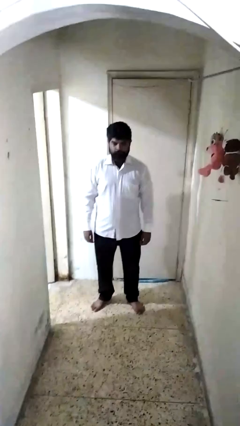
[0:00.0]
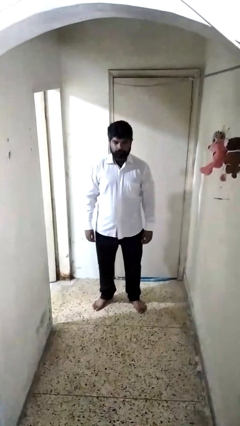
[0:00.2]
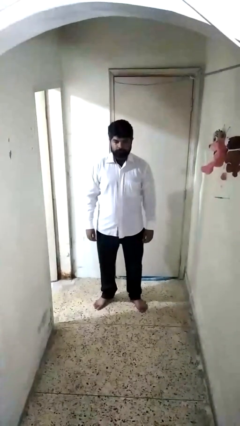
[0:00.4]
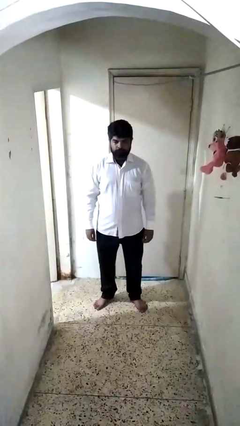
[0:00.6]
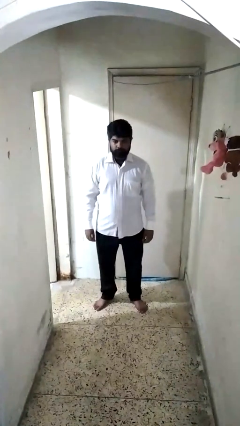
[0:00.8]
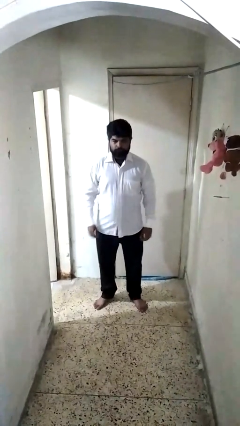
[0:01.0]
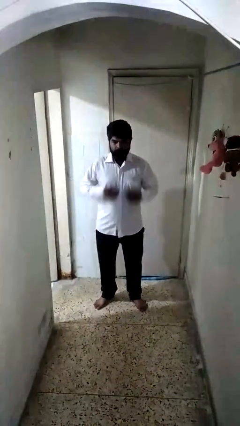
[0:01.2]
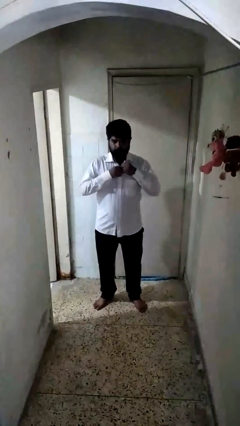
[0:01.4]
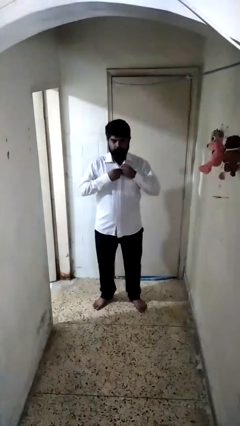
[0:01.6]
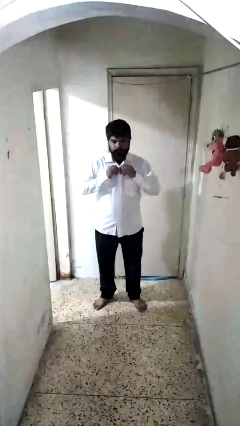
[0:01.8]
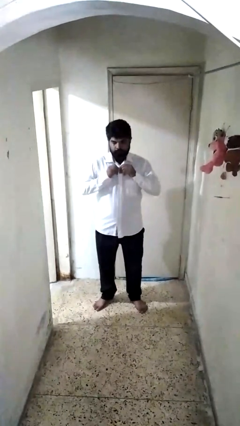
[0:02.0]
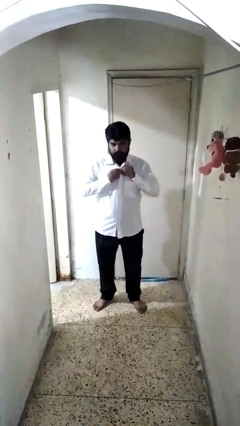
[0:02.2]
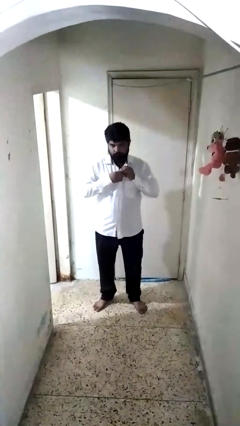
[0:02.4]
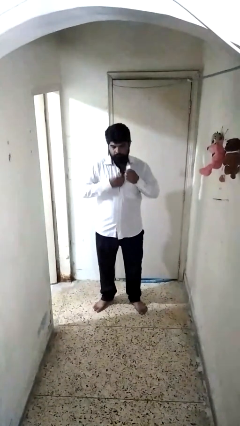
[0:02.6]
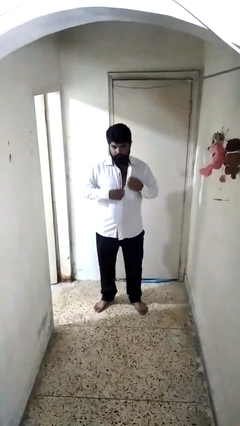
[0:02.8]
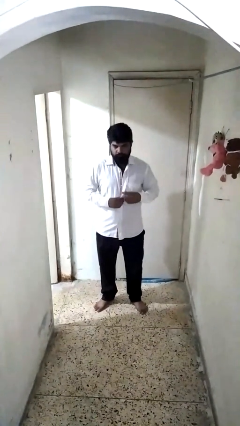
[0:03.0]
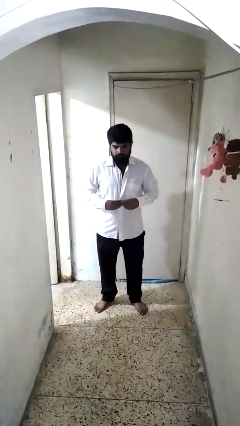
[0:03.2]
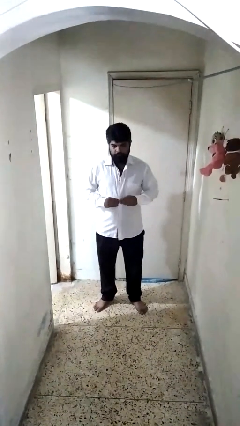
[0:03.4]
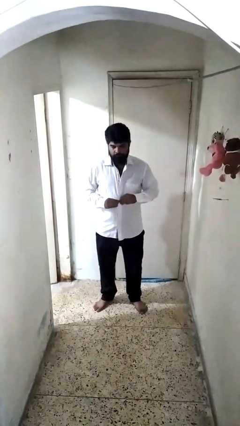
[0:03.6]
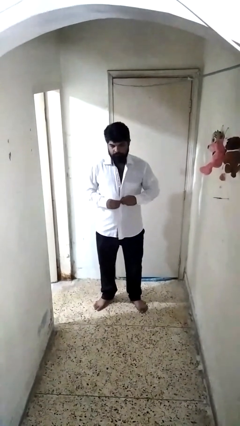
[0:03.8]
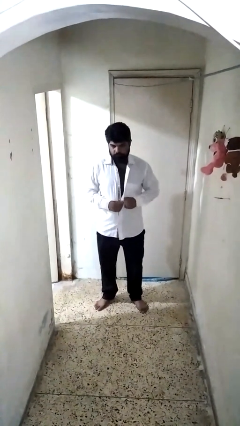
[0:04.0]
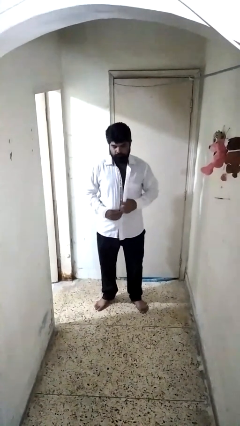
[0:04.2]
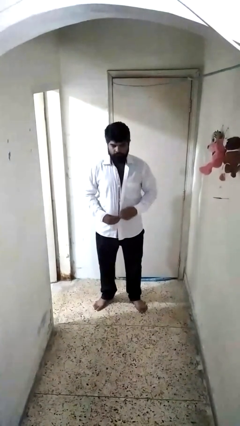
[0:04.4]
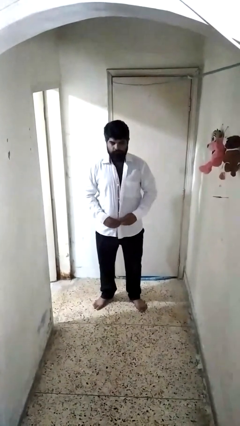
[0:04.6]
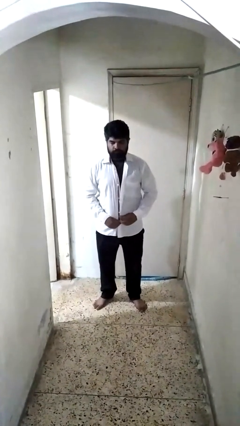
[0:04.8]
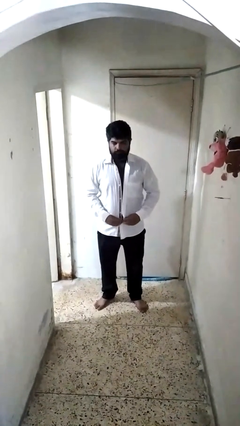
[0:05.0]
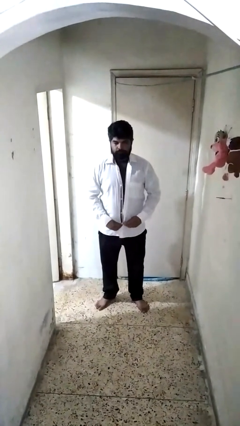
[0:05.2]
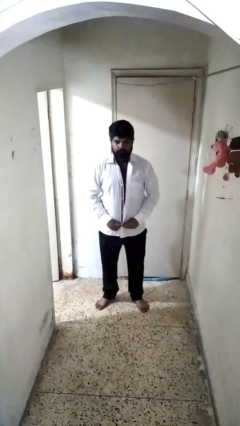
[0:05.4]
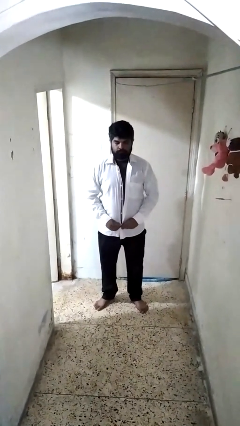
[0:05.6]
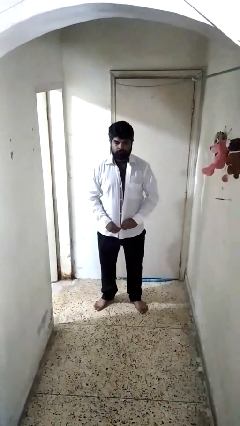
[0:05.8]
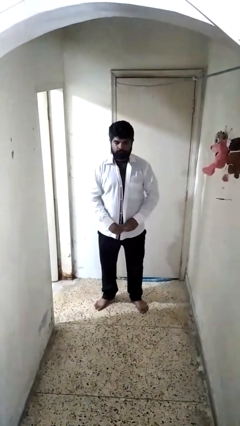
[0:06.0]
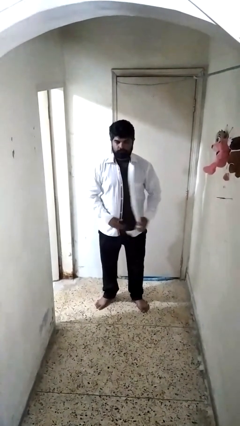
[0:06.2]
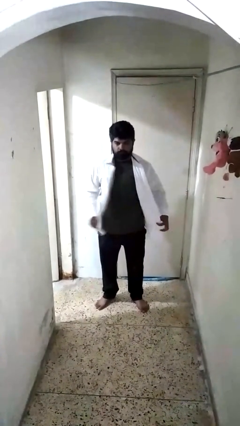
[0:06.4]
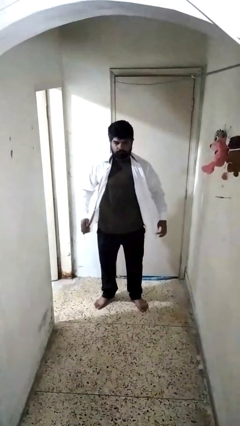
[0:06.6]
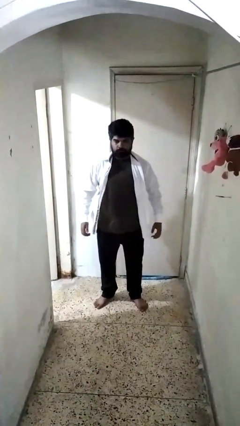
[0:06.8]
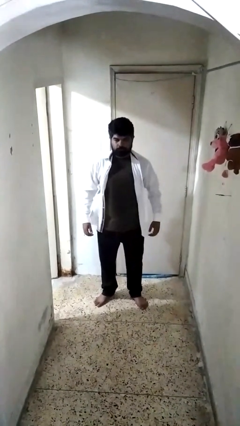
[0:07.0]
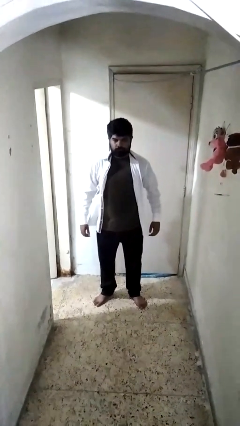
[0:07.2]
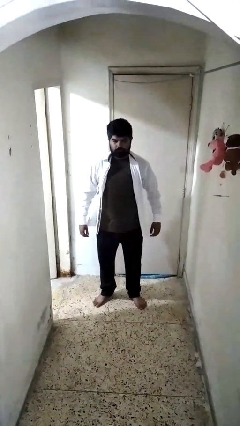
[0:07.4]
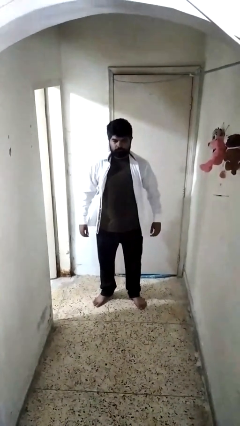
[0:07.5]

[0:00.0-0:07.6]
person unbuttons shirt

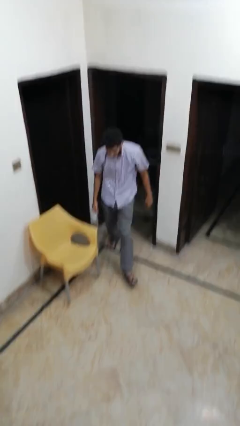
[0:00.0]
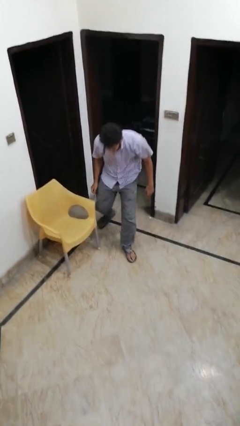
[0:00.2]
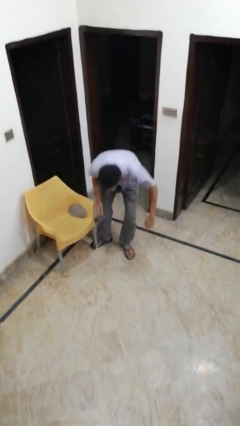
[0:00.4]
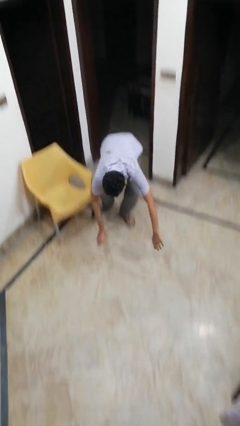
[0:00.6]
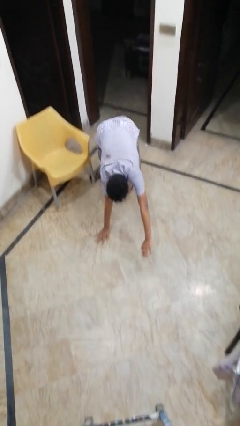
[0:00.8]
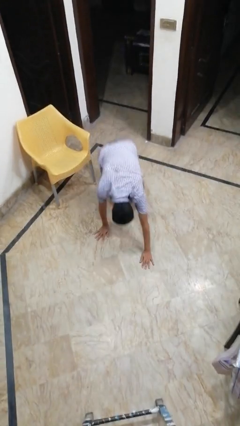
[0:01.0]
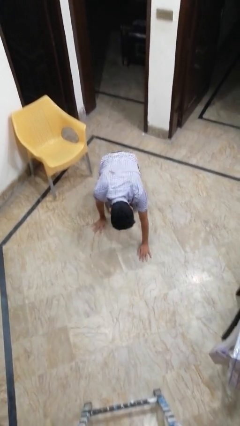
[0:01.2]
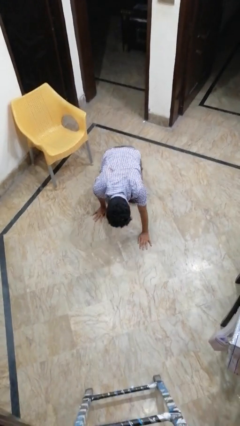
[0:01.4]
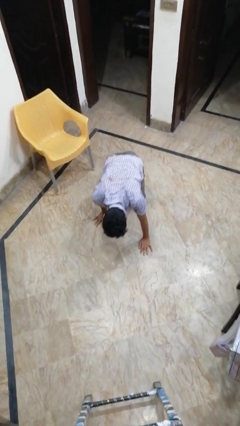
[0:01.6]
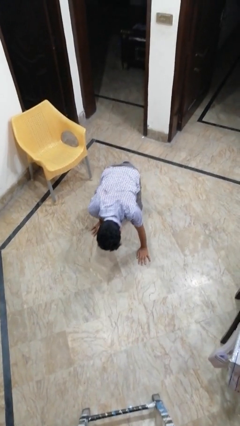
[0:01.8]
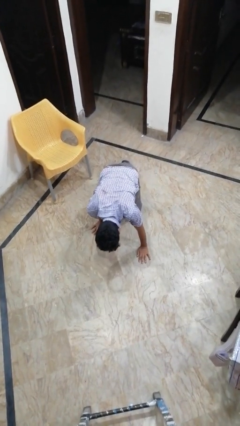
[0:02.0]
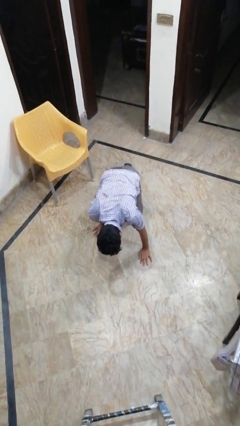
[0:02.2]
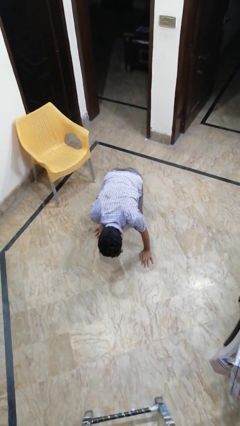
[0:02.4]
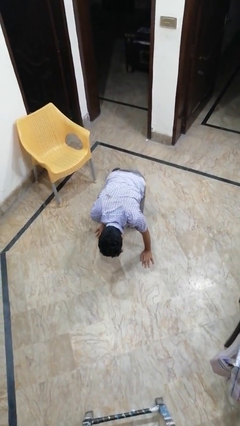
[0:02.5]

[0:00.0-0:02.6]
person trips on object on floor

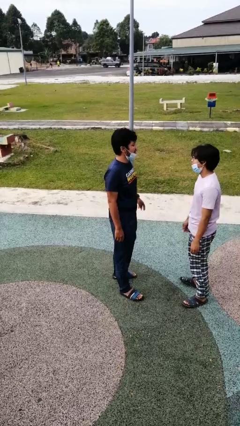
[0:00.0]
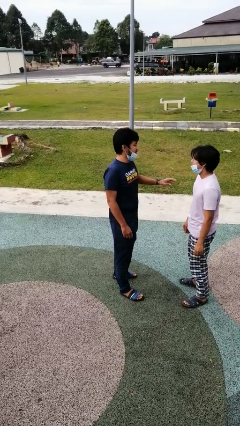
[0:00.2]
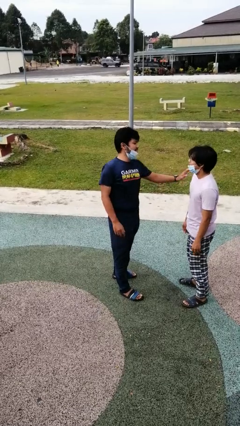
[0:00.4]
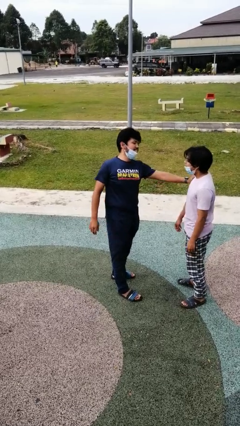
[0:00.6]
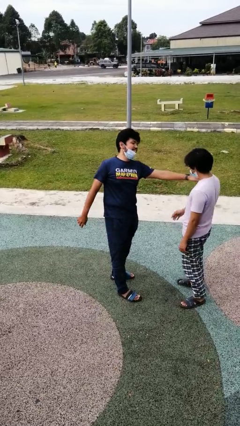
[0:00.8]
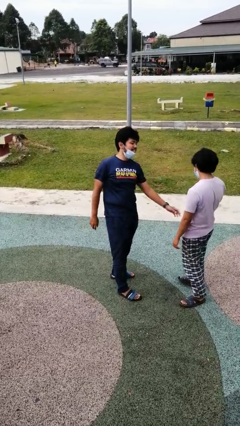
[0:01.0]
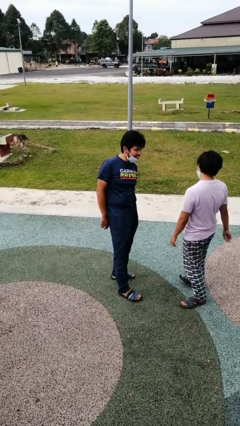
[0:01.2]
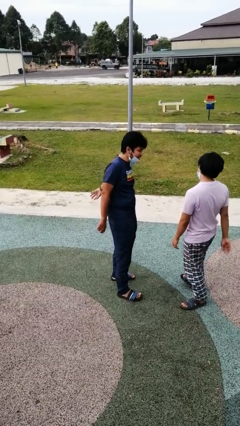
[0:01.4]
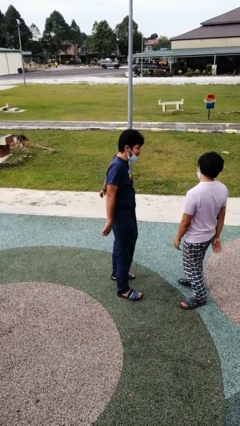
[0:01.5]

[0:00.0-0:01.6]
person shoves person

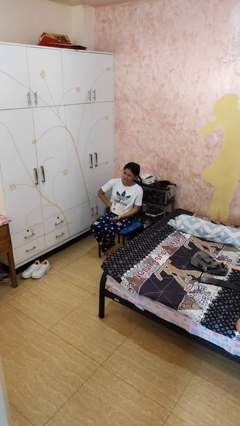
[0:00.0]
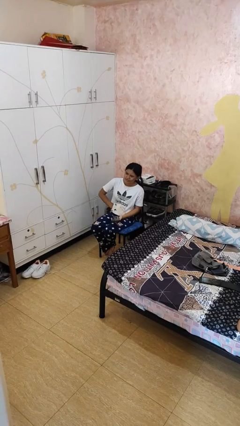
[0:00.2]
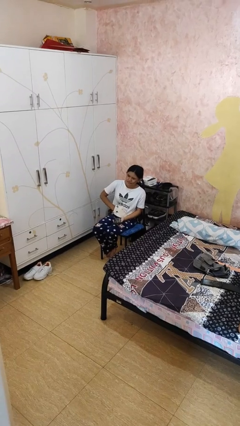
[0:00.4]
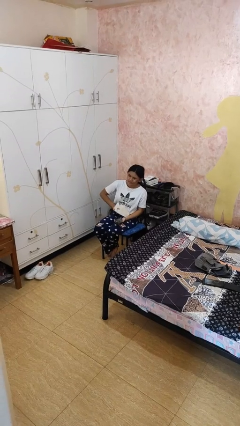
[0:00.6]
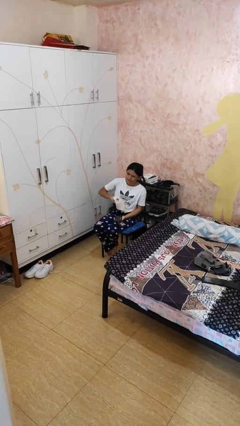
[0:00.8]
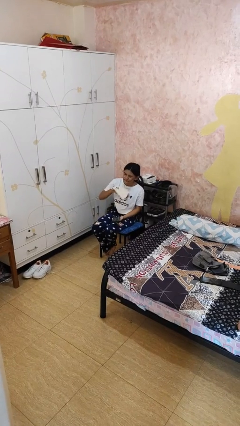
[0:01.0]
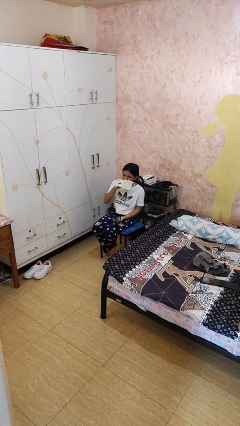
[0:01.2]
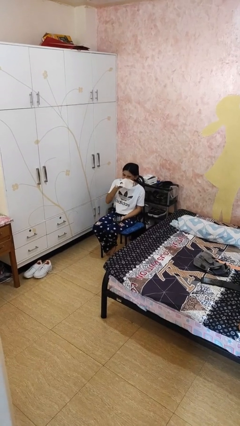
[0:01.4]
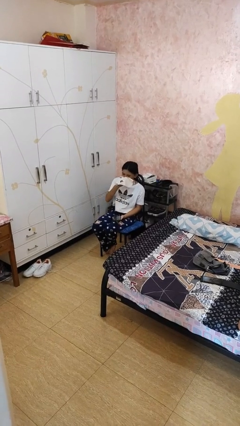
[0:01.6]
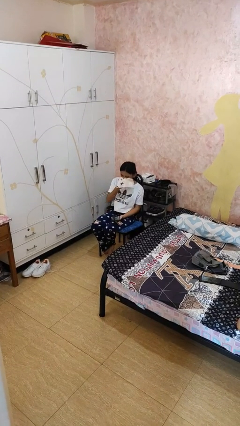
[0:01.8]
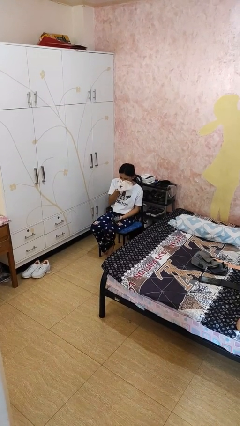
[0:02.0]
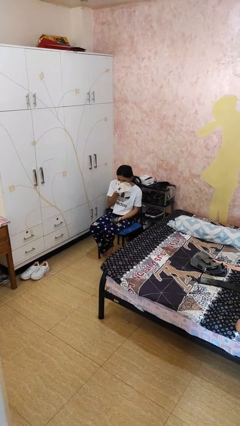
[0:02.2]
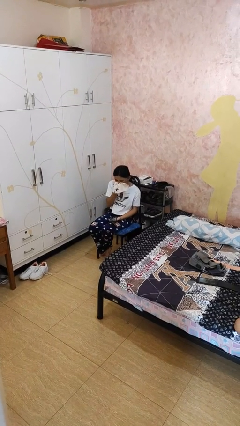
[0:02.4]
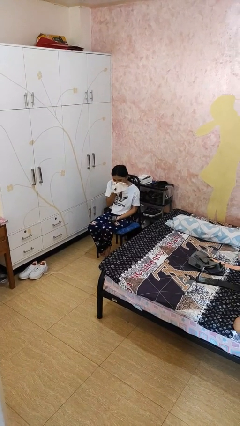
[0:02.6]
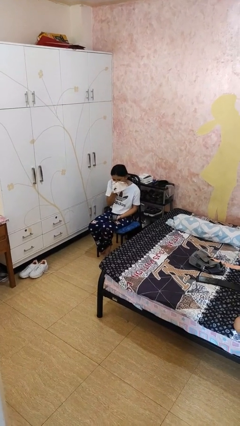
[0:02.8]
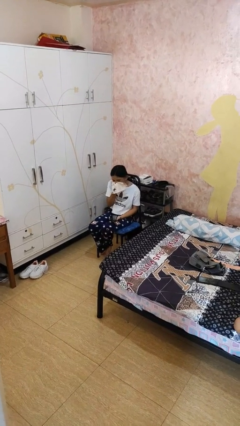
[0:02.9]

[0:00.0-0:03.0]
person blows nose

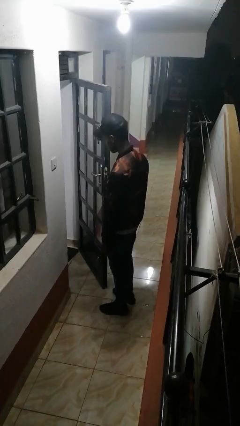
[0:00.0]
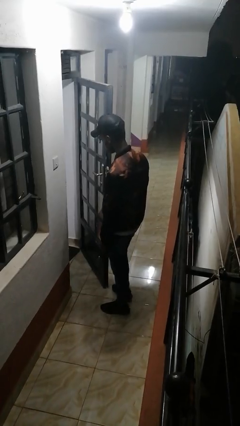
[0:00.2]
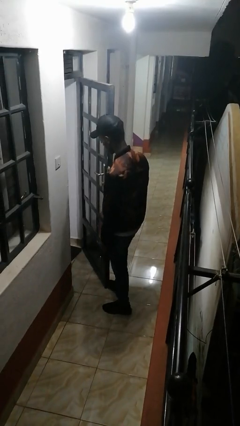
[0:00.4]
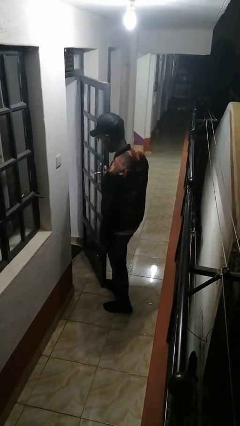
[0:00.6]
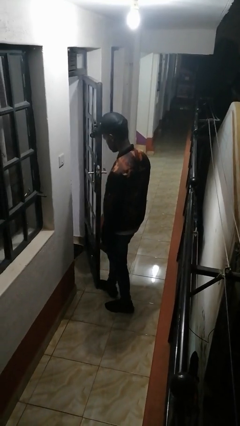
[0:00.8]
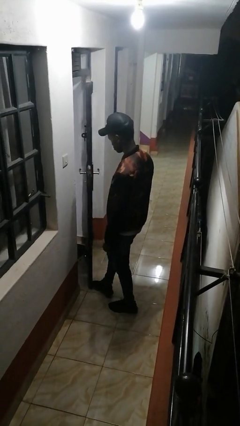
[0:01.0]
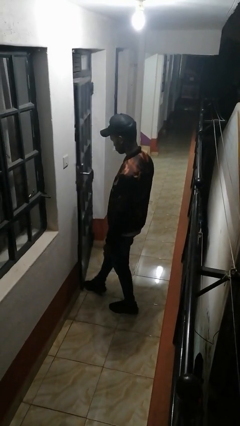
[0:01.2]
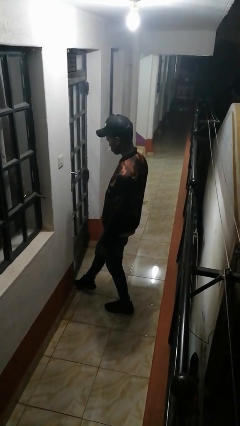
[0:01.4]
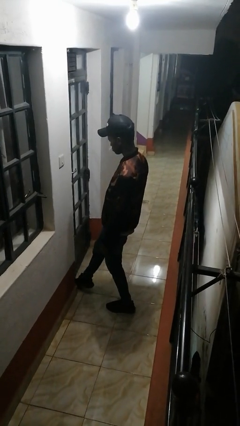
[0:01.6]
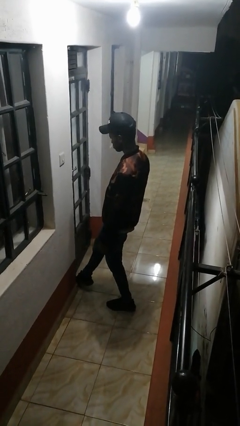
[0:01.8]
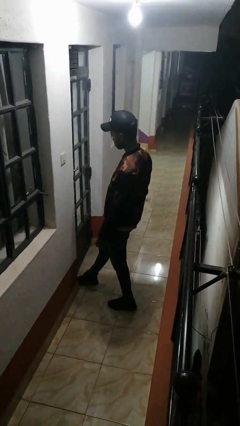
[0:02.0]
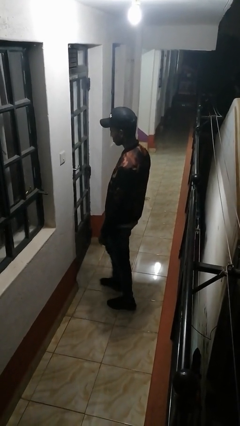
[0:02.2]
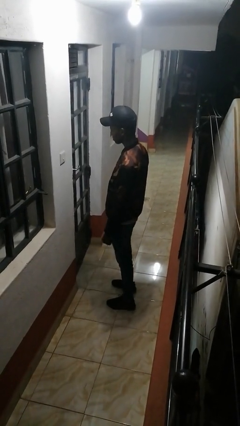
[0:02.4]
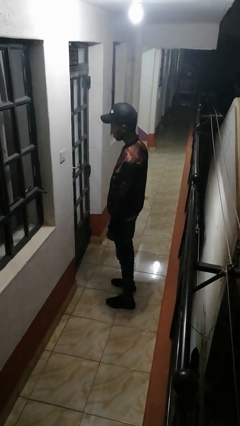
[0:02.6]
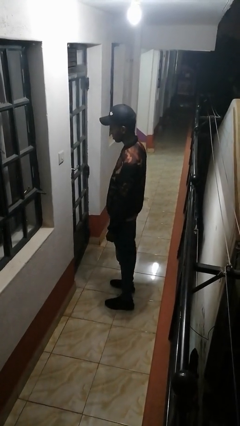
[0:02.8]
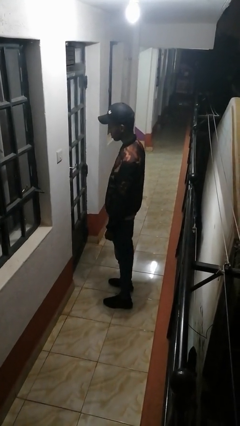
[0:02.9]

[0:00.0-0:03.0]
person closes door with foot
